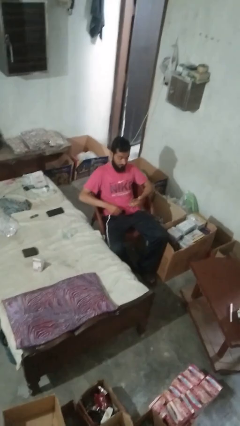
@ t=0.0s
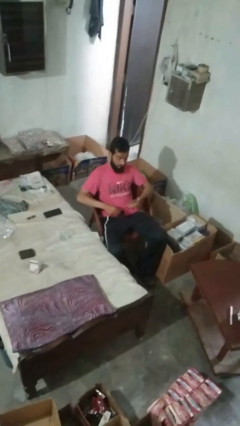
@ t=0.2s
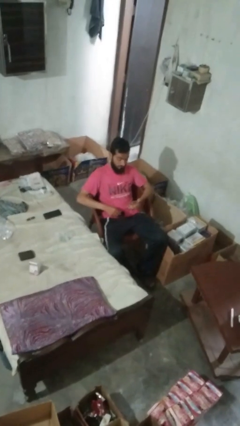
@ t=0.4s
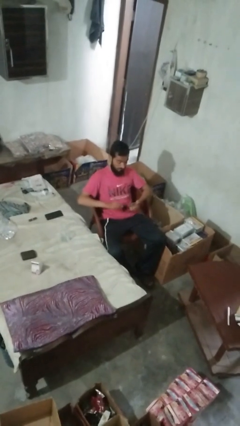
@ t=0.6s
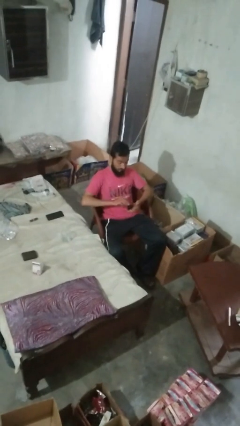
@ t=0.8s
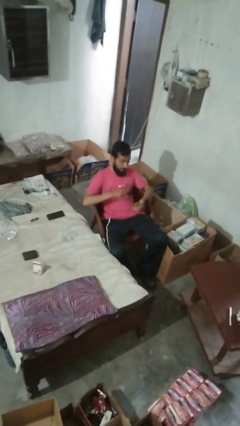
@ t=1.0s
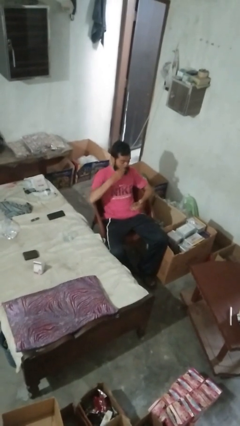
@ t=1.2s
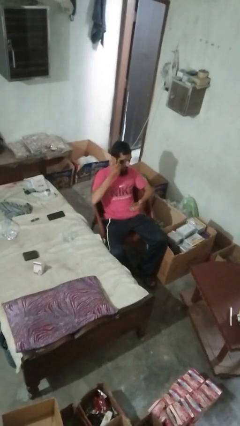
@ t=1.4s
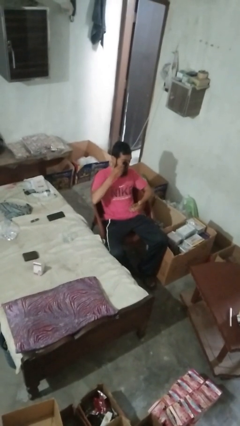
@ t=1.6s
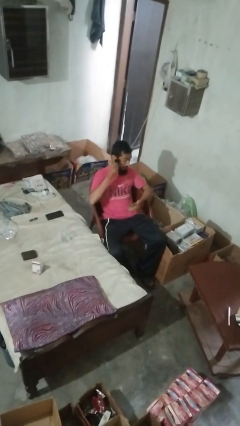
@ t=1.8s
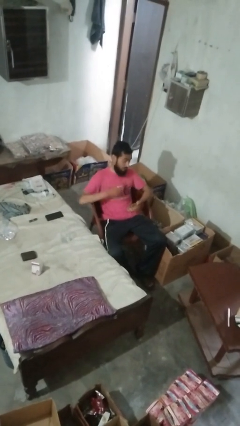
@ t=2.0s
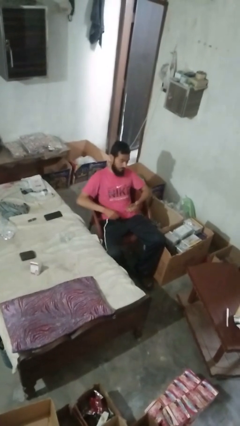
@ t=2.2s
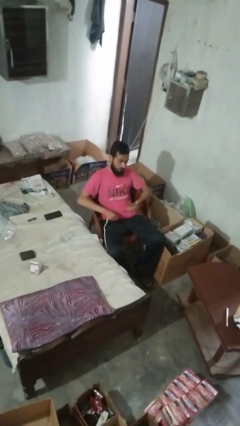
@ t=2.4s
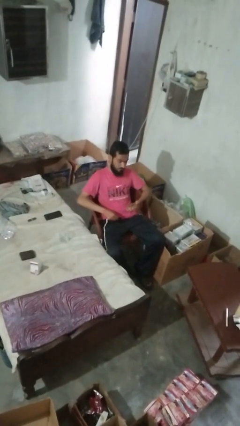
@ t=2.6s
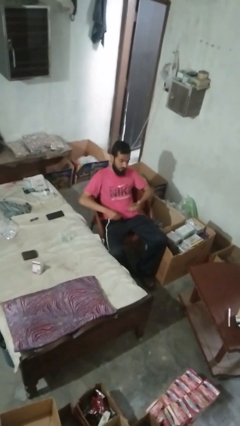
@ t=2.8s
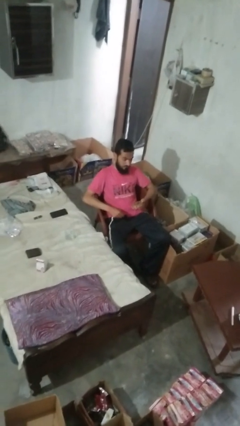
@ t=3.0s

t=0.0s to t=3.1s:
person applies eye makeup

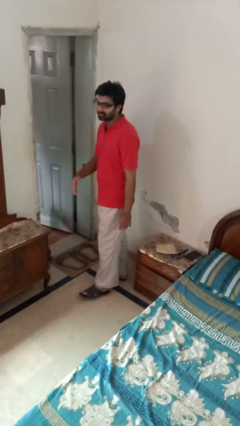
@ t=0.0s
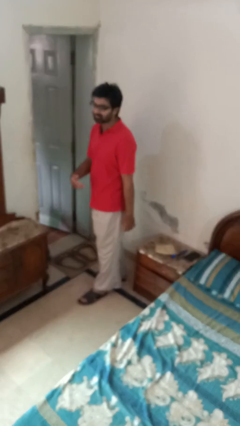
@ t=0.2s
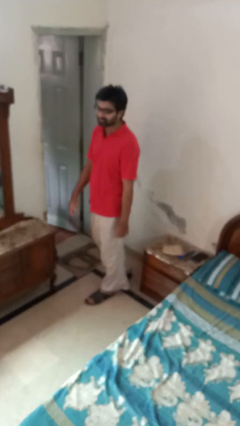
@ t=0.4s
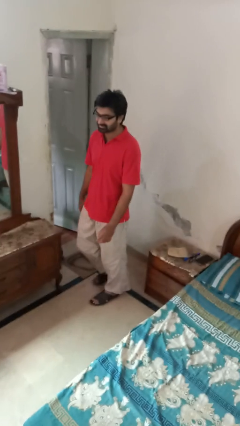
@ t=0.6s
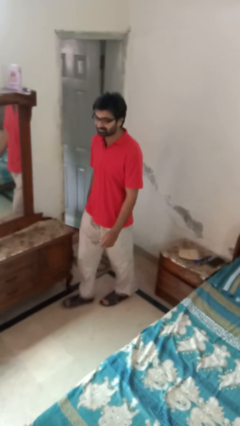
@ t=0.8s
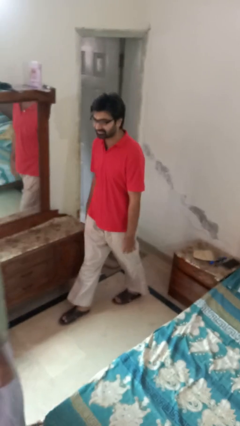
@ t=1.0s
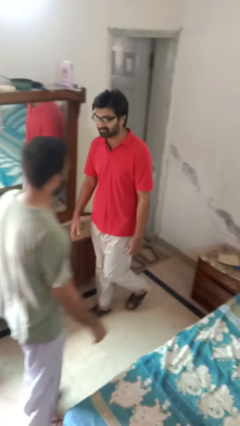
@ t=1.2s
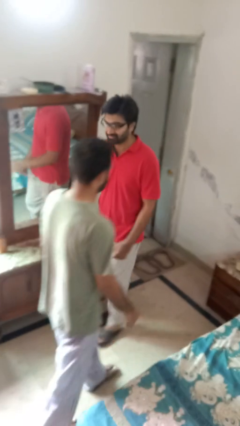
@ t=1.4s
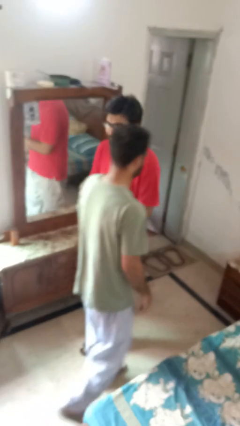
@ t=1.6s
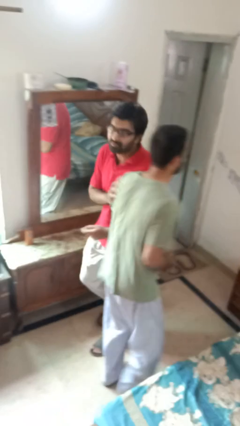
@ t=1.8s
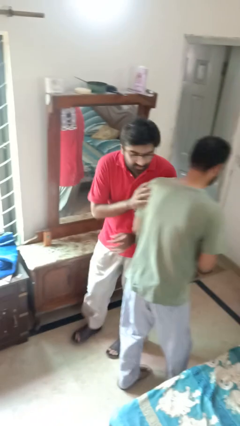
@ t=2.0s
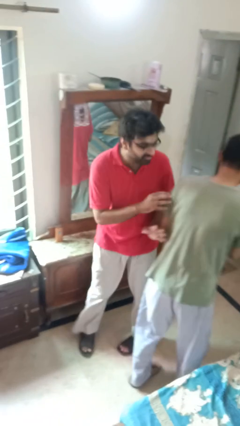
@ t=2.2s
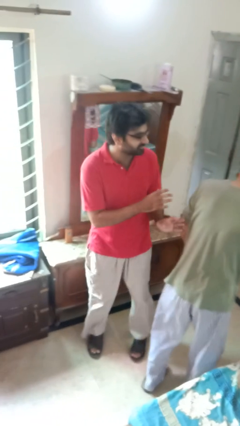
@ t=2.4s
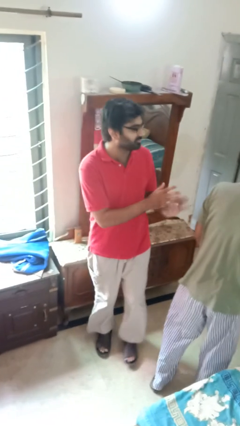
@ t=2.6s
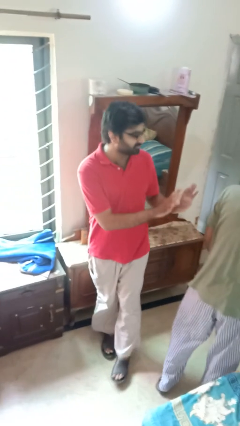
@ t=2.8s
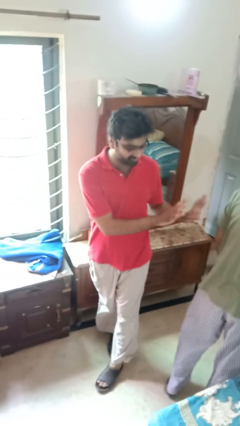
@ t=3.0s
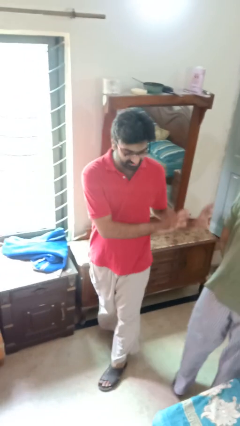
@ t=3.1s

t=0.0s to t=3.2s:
person bumps into person

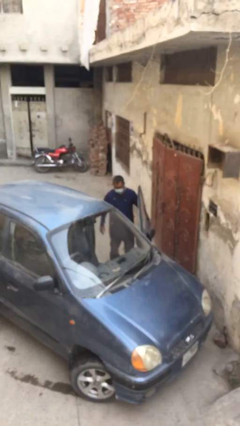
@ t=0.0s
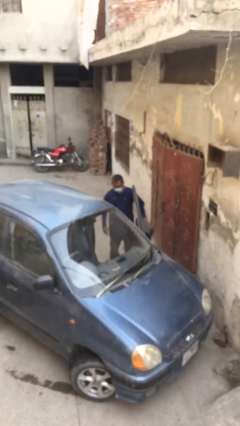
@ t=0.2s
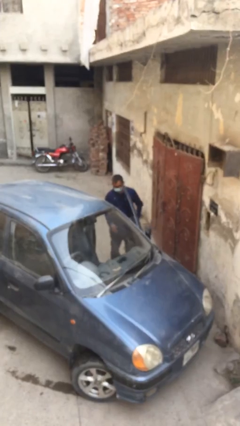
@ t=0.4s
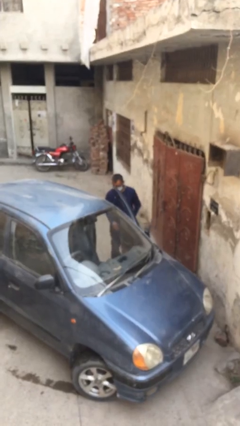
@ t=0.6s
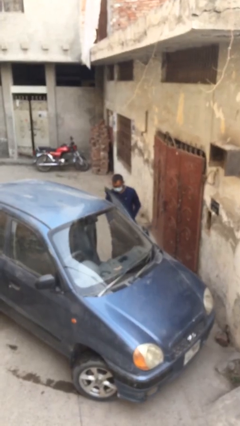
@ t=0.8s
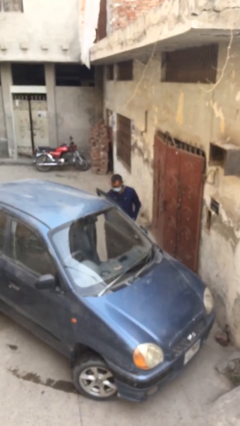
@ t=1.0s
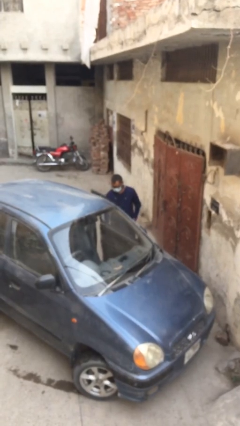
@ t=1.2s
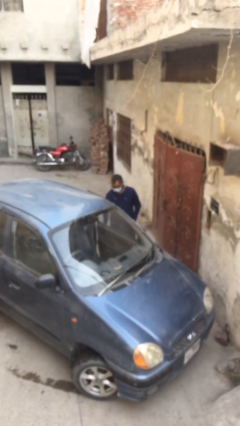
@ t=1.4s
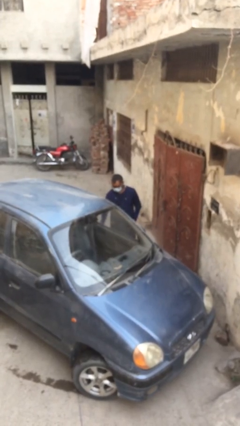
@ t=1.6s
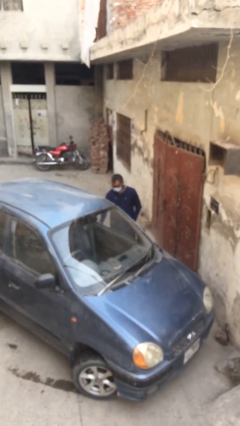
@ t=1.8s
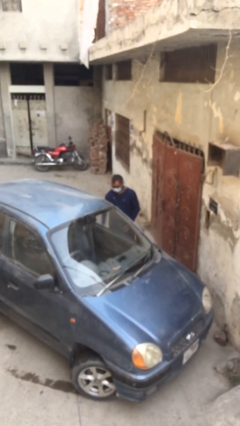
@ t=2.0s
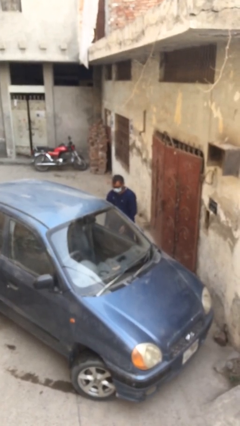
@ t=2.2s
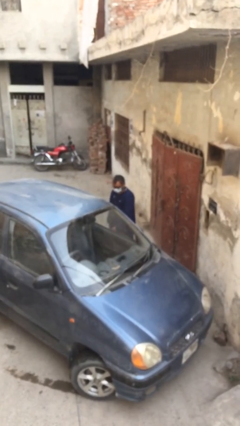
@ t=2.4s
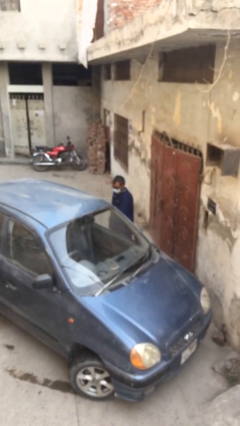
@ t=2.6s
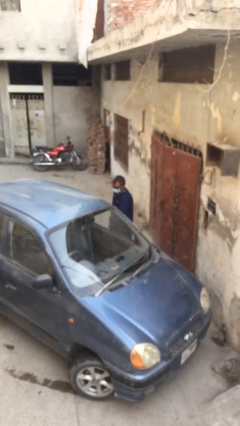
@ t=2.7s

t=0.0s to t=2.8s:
person closes car door

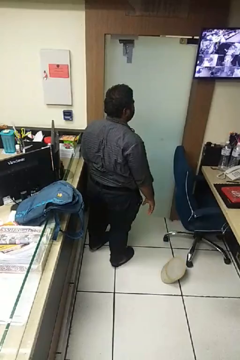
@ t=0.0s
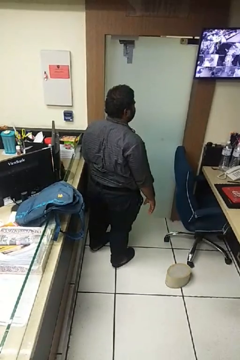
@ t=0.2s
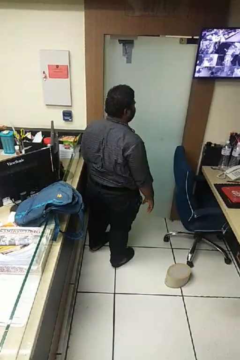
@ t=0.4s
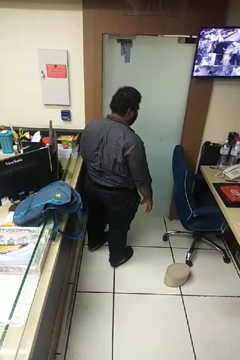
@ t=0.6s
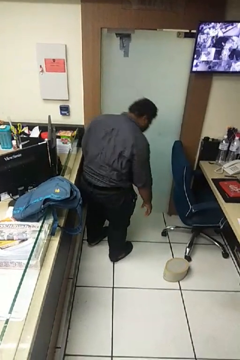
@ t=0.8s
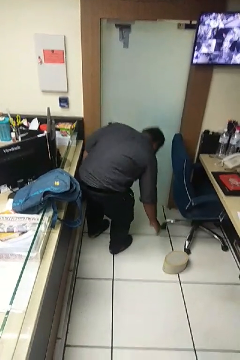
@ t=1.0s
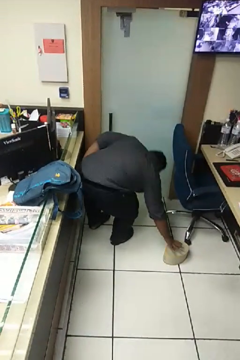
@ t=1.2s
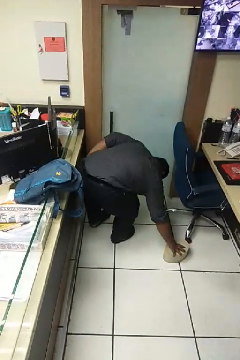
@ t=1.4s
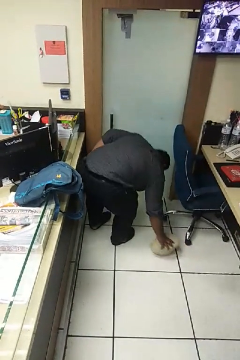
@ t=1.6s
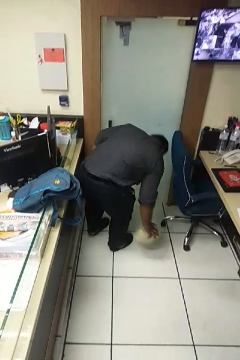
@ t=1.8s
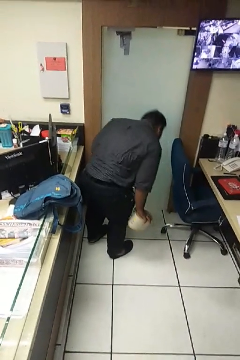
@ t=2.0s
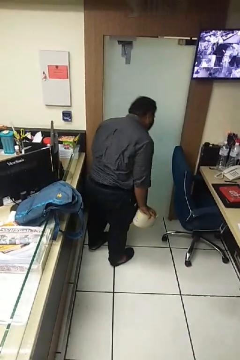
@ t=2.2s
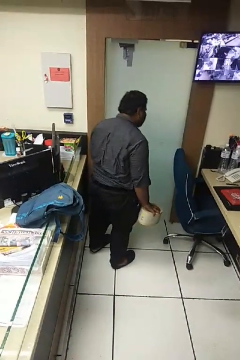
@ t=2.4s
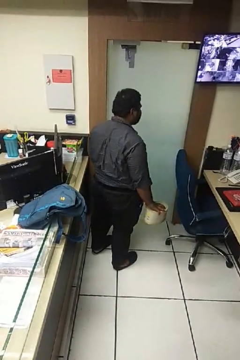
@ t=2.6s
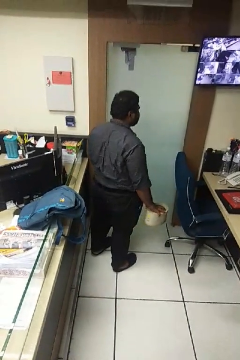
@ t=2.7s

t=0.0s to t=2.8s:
person picks up object from floor

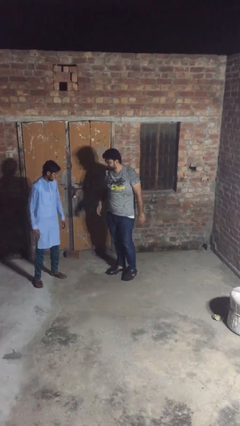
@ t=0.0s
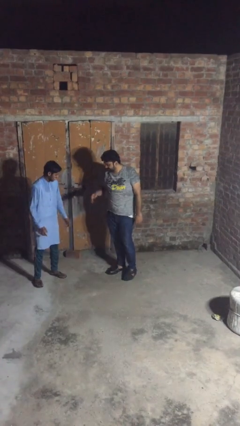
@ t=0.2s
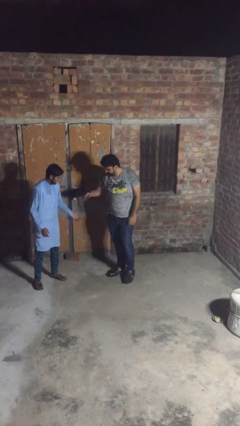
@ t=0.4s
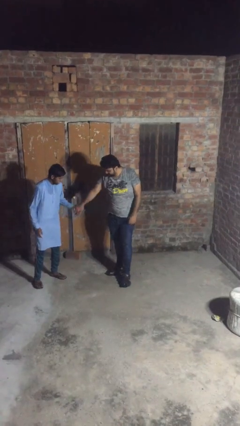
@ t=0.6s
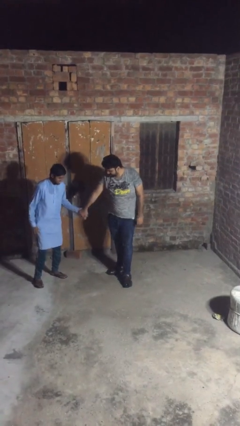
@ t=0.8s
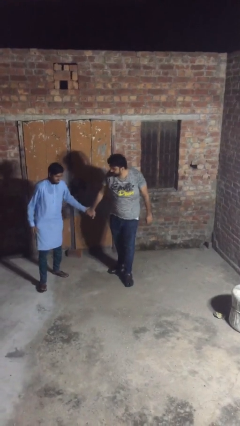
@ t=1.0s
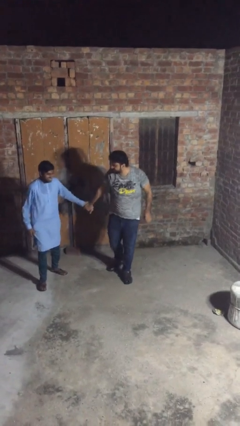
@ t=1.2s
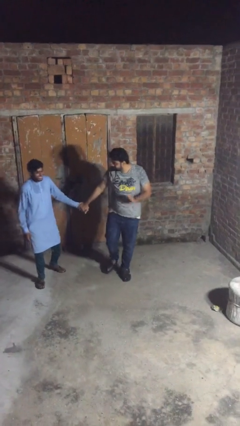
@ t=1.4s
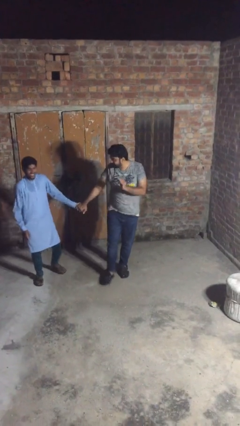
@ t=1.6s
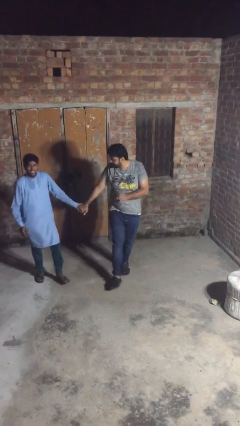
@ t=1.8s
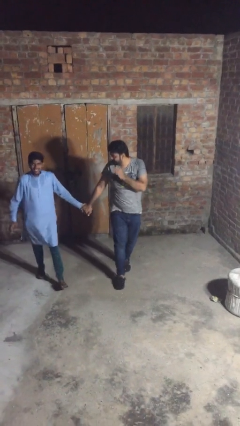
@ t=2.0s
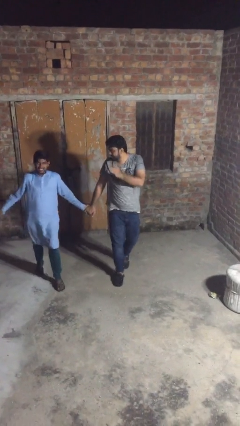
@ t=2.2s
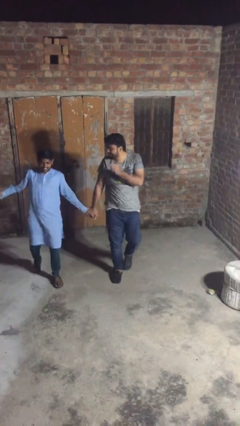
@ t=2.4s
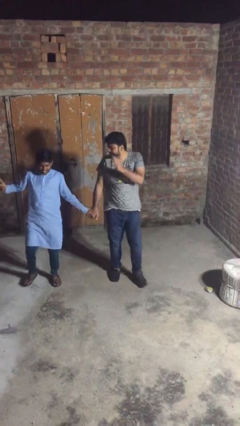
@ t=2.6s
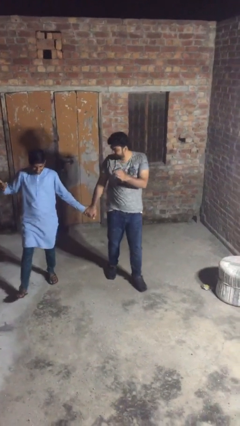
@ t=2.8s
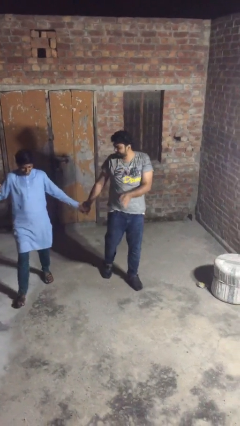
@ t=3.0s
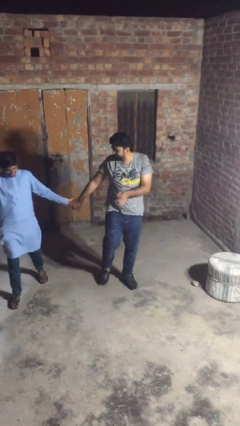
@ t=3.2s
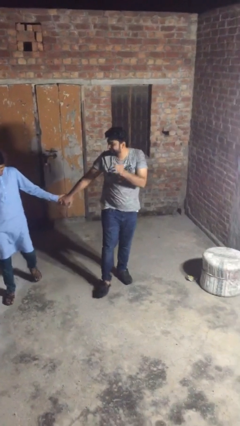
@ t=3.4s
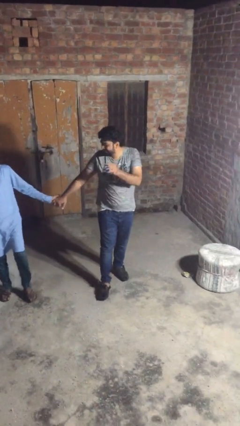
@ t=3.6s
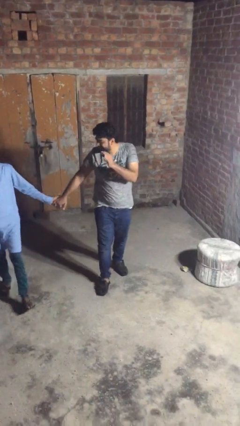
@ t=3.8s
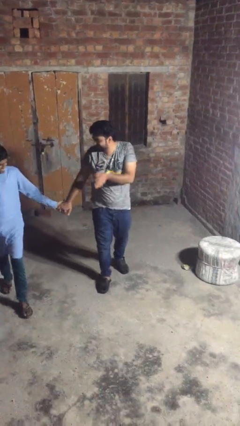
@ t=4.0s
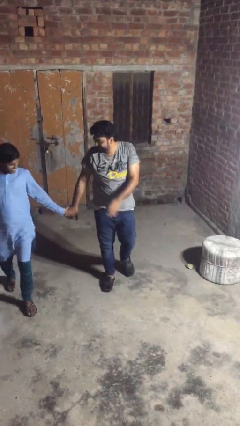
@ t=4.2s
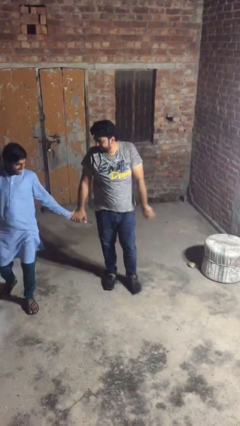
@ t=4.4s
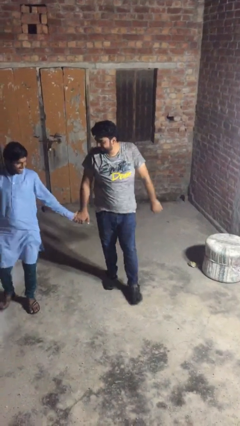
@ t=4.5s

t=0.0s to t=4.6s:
person holds hand

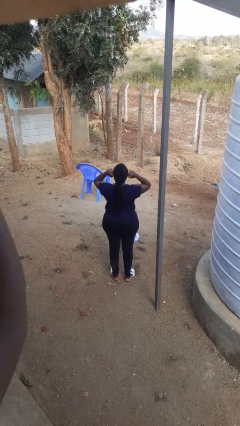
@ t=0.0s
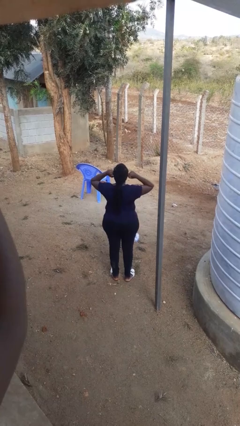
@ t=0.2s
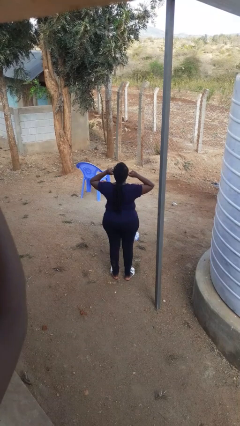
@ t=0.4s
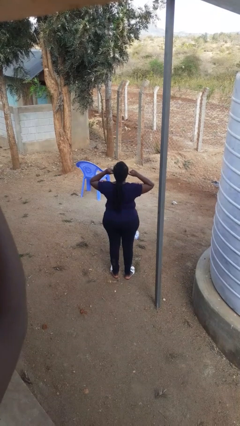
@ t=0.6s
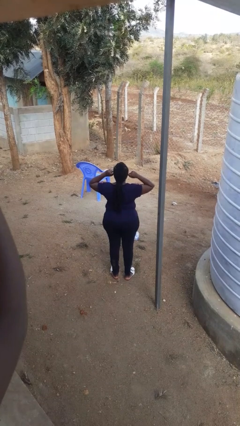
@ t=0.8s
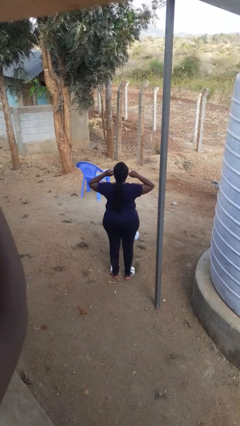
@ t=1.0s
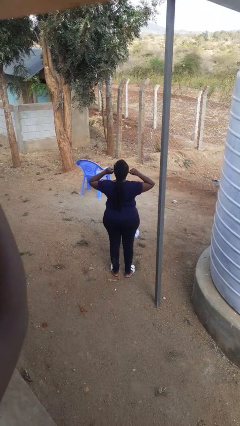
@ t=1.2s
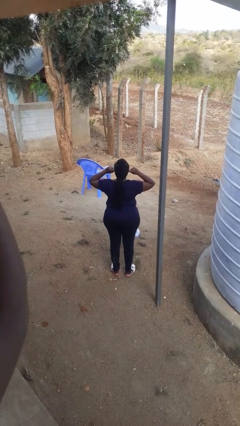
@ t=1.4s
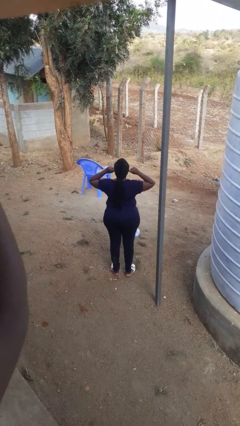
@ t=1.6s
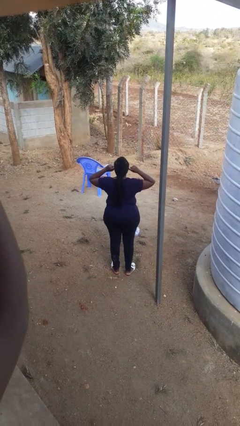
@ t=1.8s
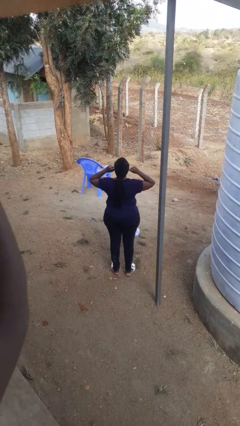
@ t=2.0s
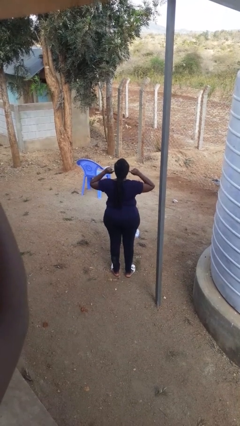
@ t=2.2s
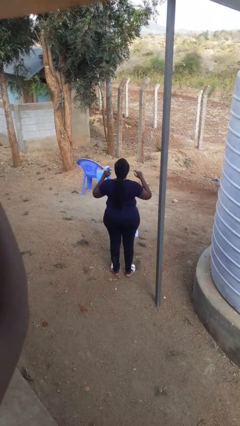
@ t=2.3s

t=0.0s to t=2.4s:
person puts fingers in ear
